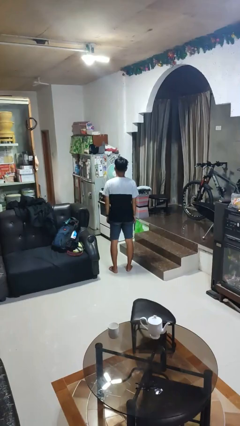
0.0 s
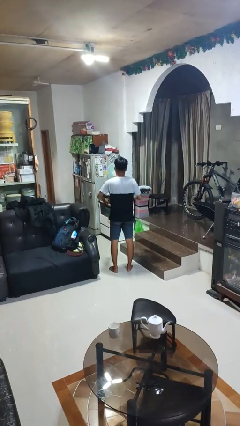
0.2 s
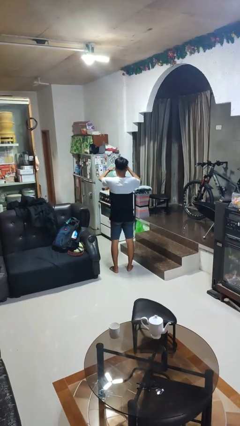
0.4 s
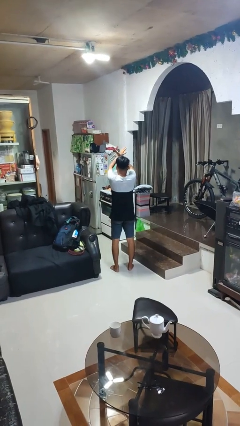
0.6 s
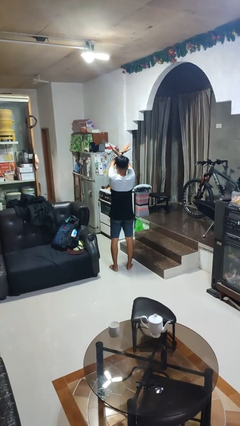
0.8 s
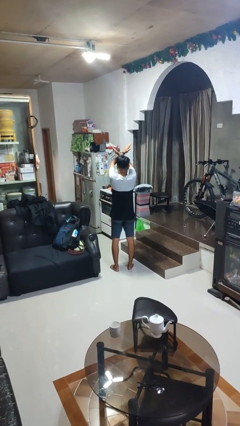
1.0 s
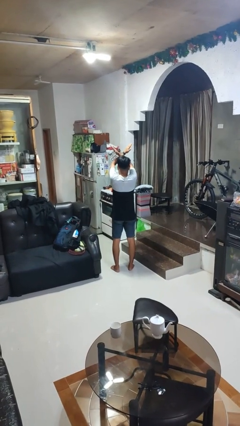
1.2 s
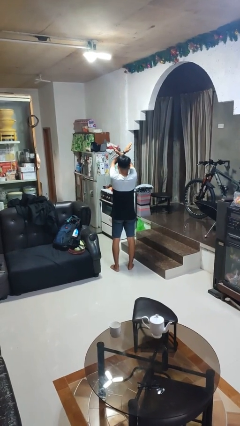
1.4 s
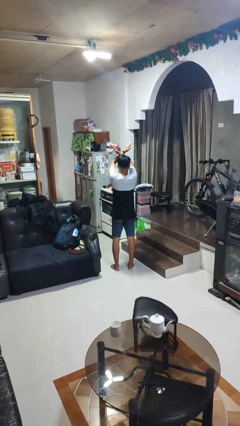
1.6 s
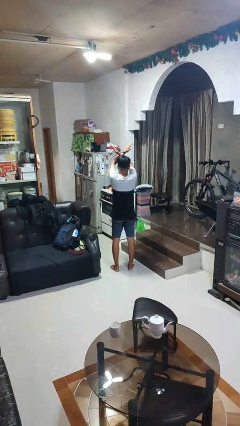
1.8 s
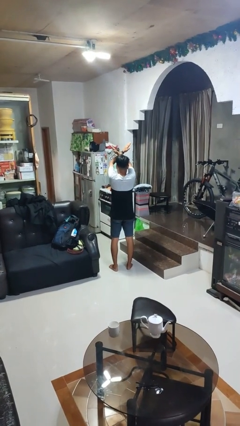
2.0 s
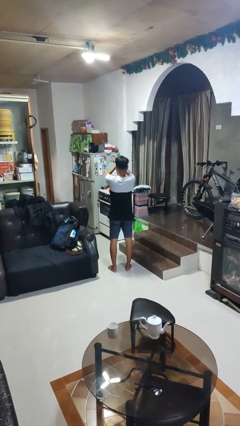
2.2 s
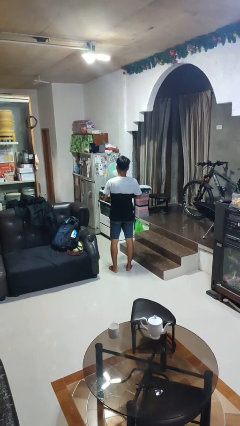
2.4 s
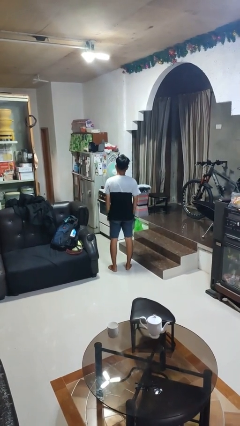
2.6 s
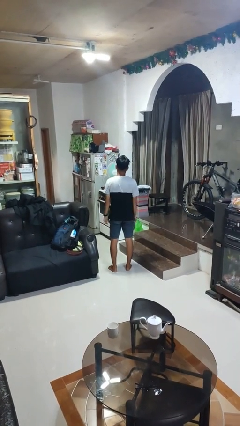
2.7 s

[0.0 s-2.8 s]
person gestures arms x

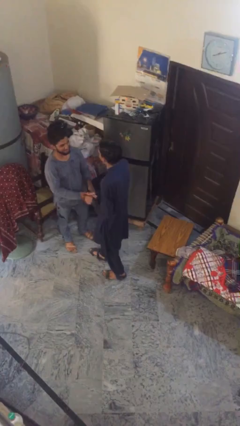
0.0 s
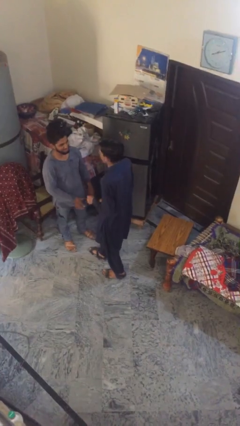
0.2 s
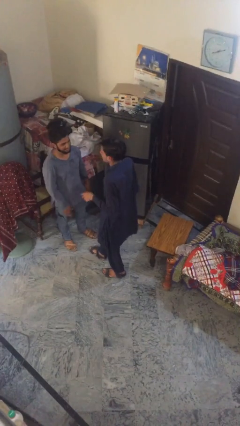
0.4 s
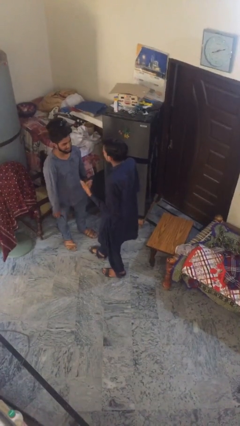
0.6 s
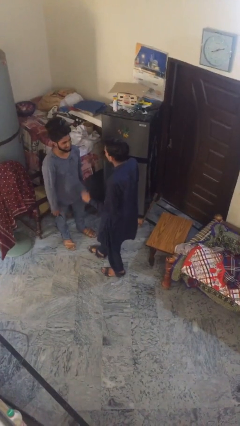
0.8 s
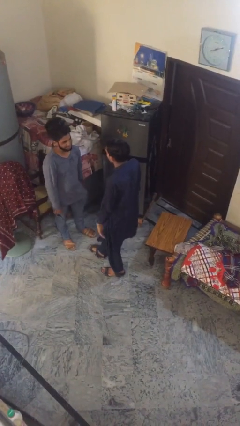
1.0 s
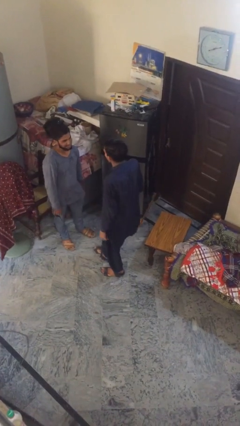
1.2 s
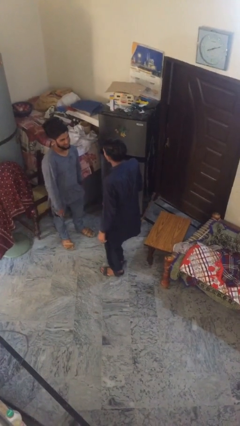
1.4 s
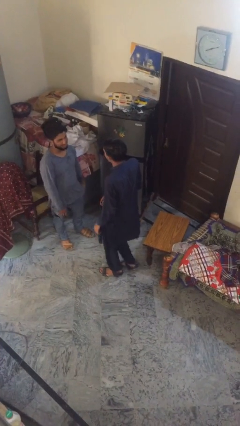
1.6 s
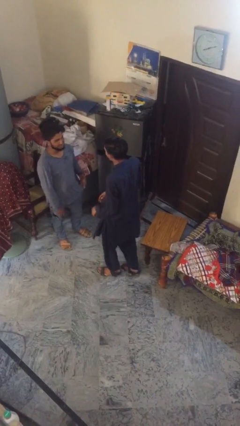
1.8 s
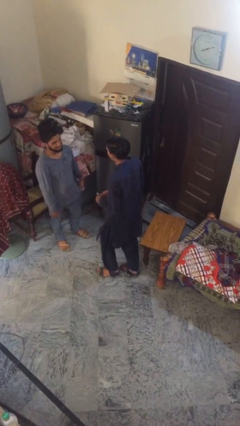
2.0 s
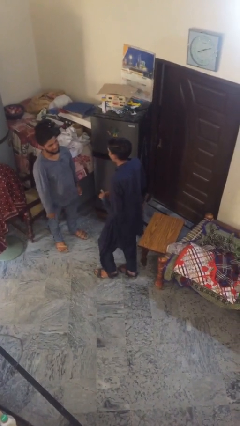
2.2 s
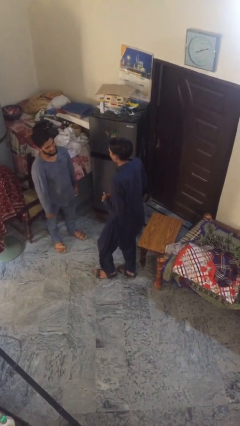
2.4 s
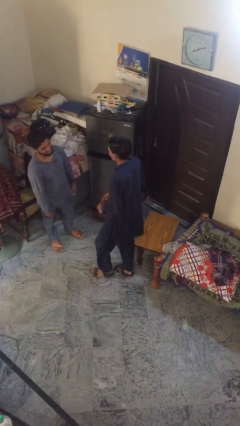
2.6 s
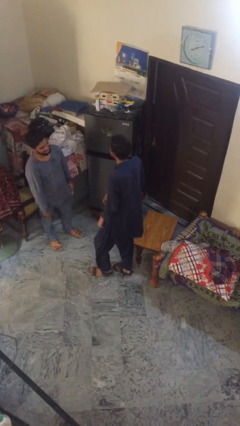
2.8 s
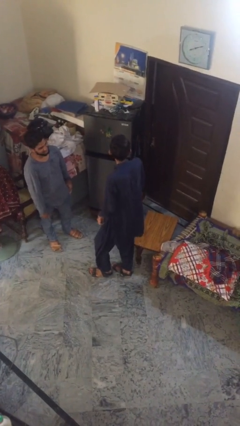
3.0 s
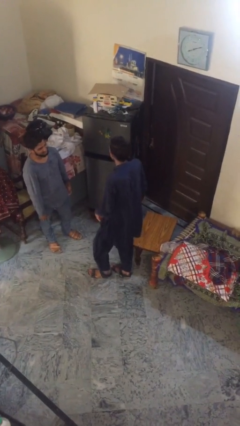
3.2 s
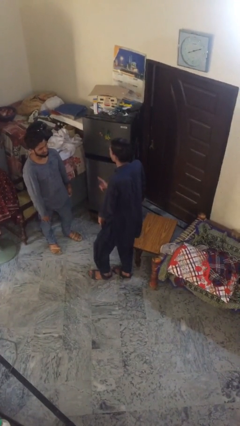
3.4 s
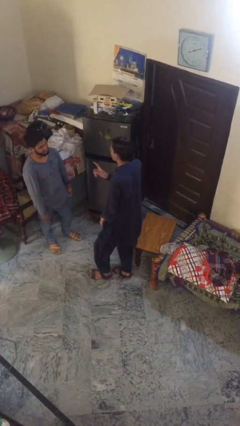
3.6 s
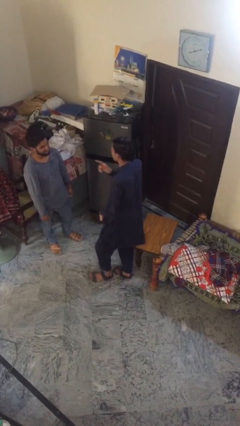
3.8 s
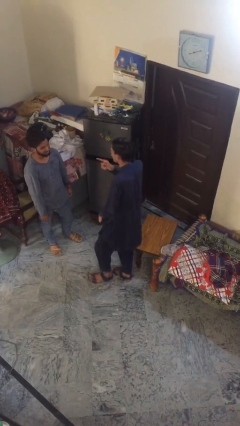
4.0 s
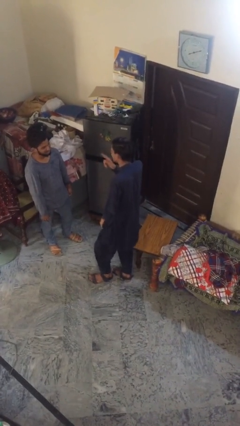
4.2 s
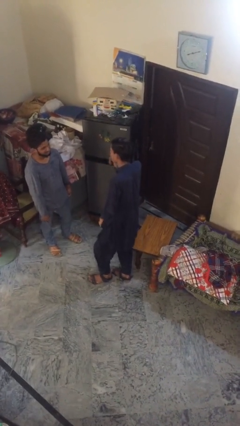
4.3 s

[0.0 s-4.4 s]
person talks to person

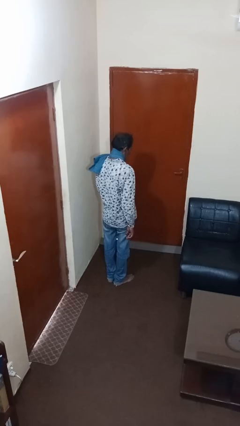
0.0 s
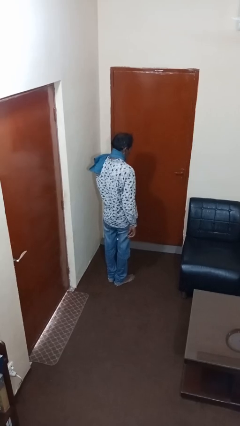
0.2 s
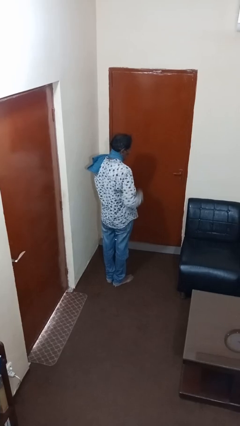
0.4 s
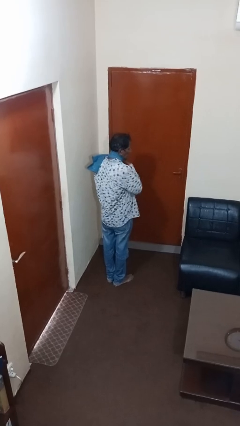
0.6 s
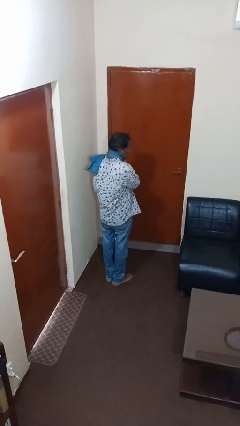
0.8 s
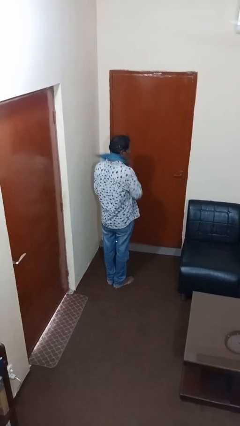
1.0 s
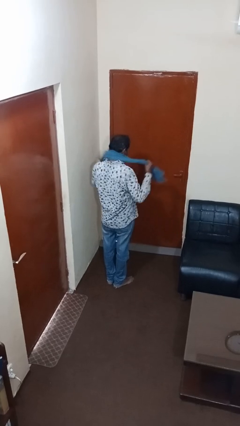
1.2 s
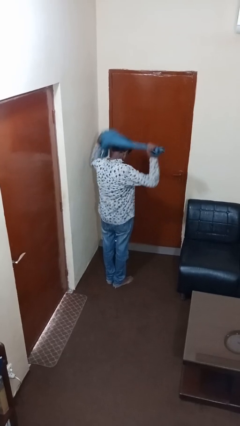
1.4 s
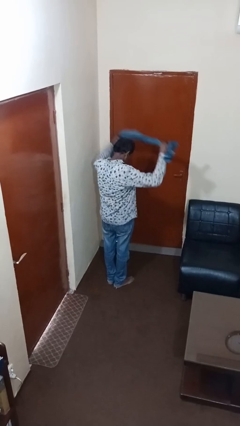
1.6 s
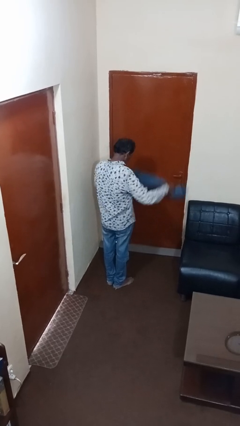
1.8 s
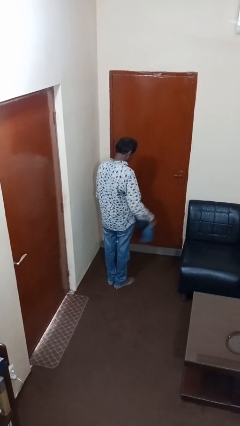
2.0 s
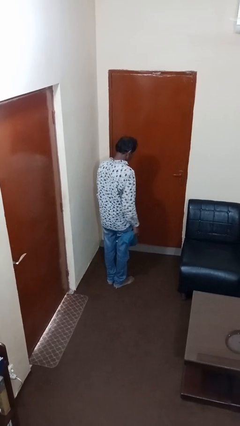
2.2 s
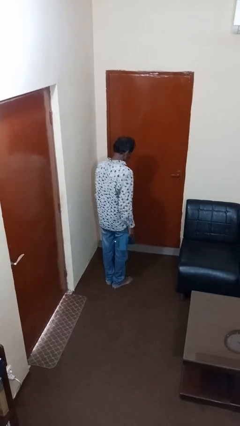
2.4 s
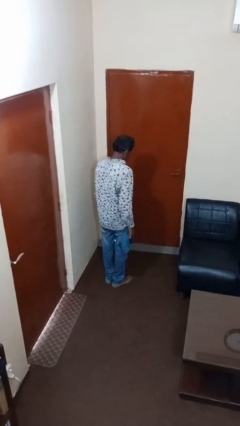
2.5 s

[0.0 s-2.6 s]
person takes off scarf

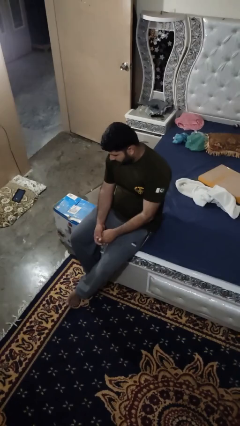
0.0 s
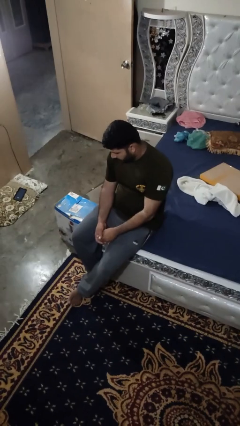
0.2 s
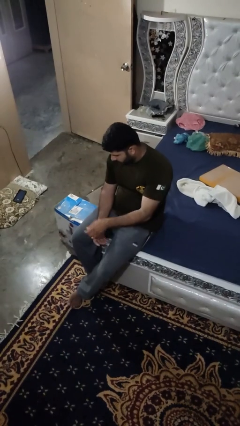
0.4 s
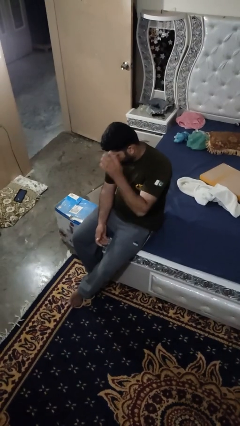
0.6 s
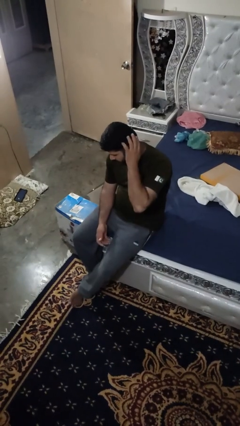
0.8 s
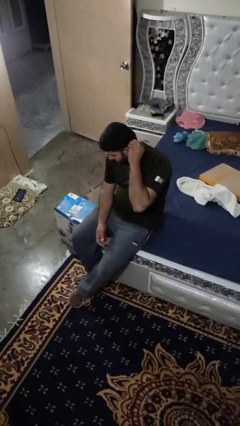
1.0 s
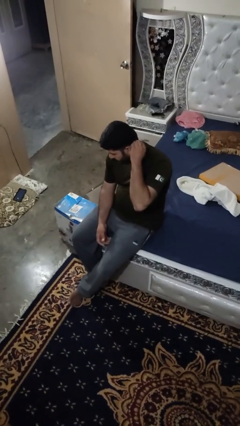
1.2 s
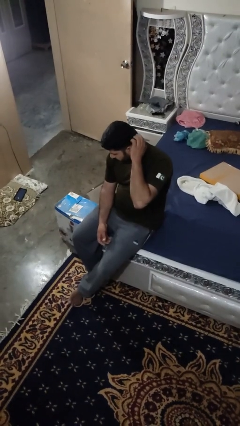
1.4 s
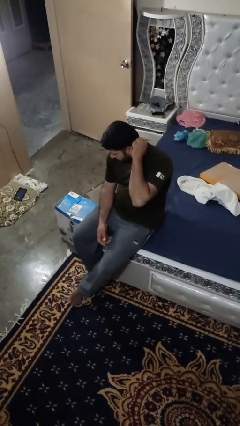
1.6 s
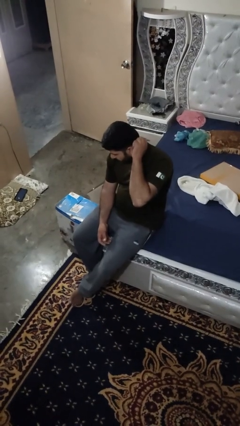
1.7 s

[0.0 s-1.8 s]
person strokes hair

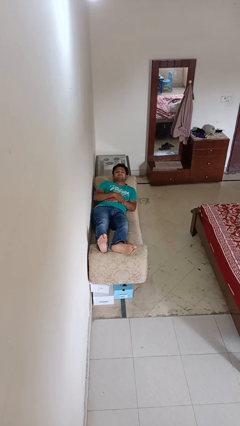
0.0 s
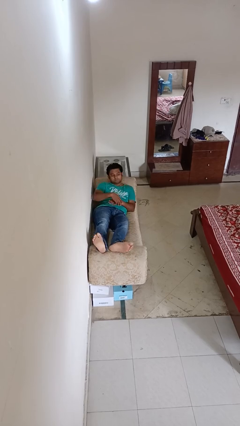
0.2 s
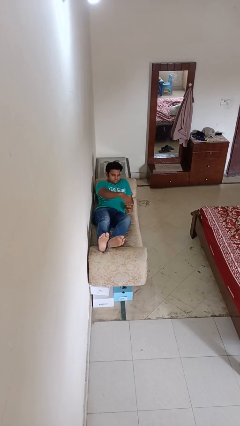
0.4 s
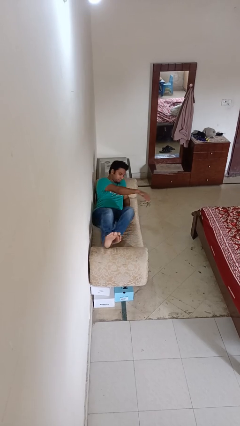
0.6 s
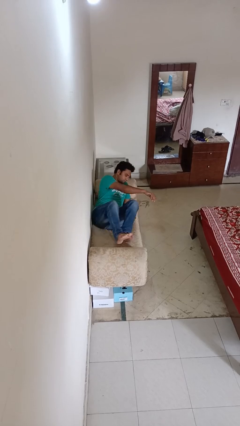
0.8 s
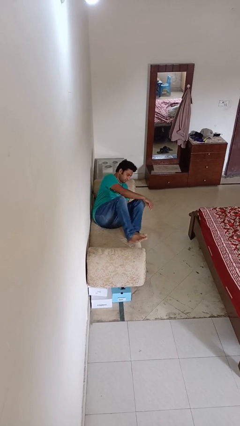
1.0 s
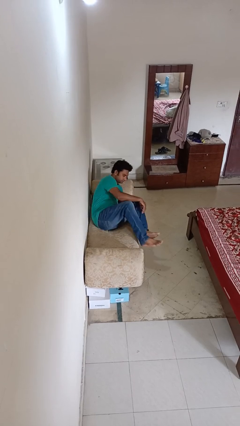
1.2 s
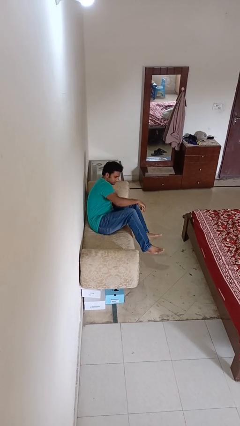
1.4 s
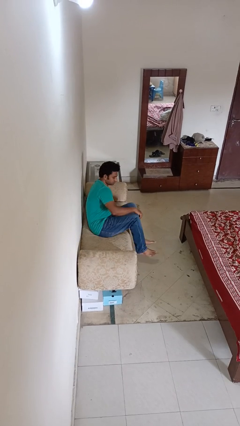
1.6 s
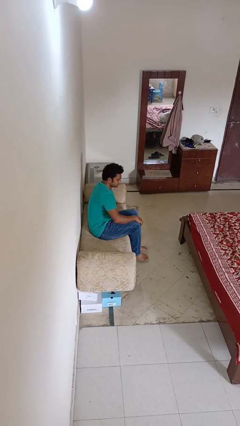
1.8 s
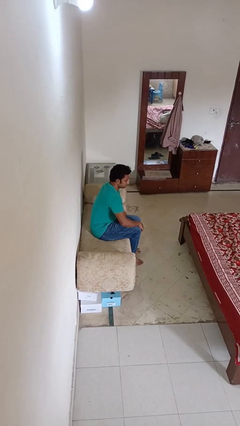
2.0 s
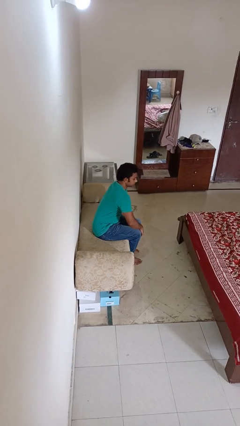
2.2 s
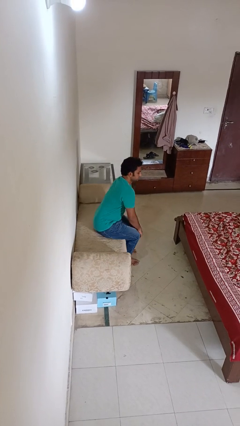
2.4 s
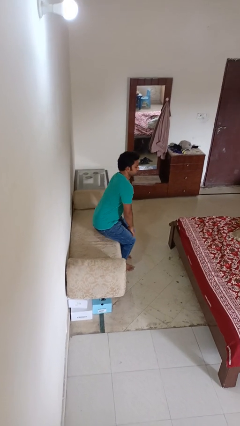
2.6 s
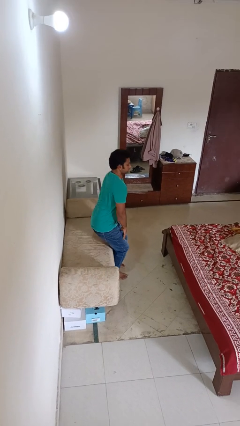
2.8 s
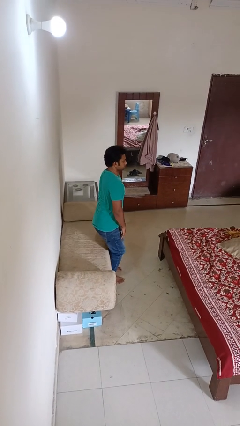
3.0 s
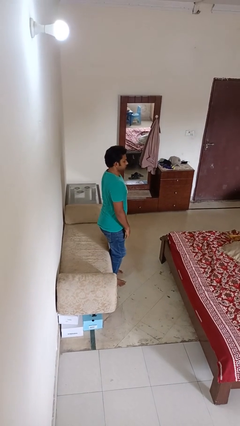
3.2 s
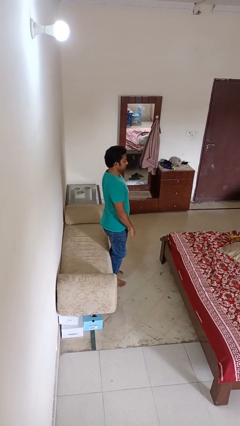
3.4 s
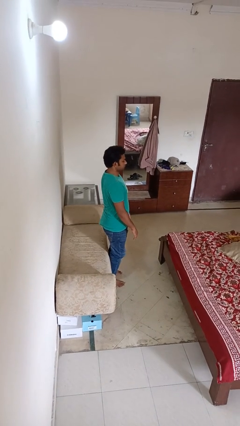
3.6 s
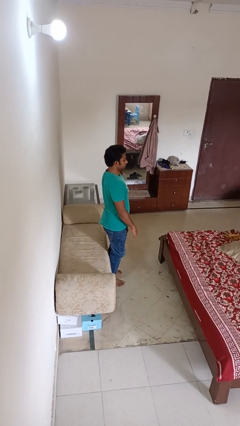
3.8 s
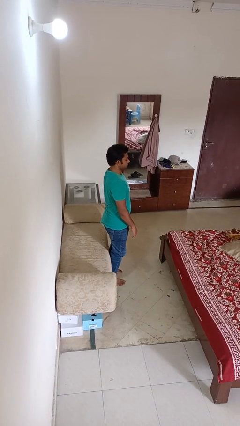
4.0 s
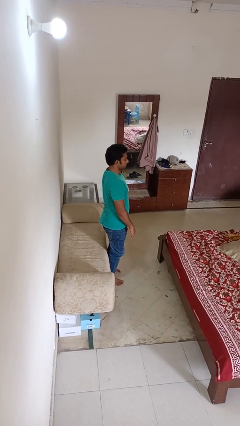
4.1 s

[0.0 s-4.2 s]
person stands up

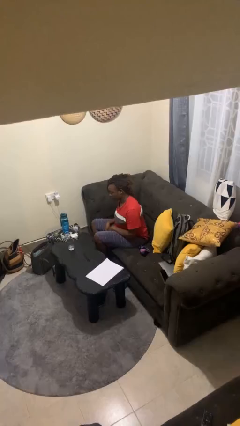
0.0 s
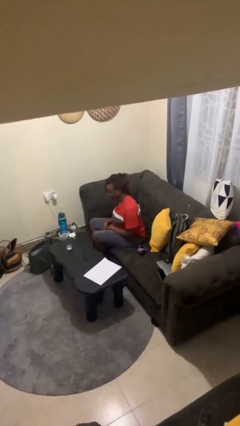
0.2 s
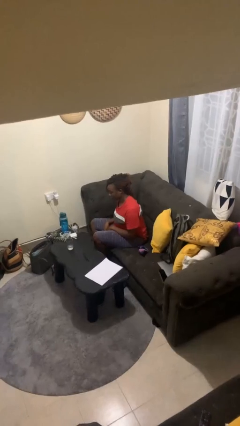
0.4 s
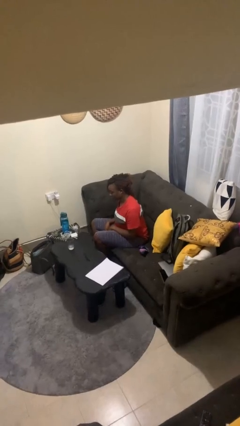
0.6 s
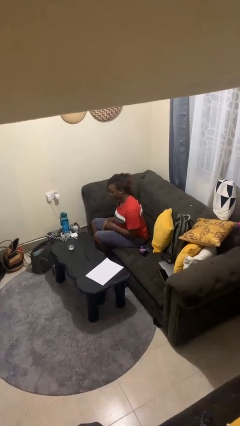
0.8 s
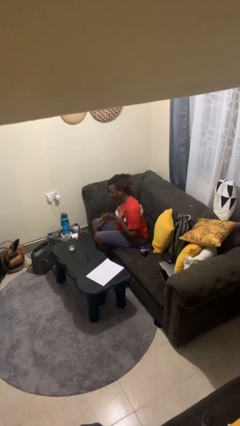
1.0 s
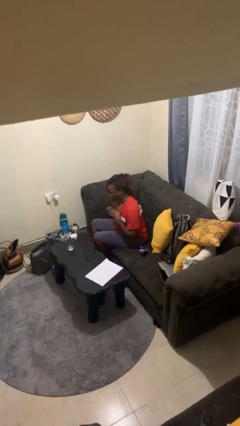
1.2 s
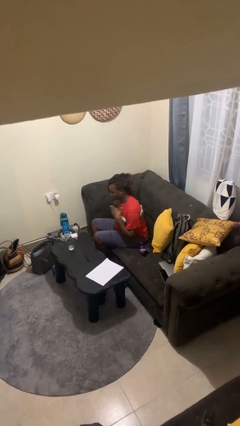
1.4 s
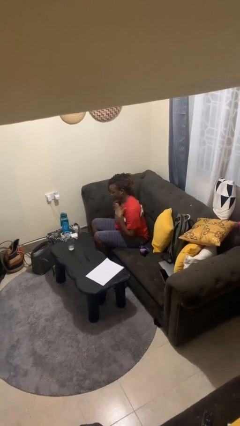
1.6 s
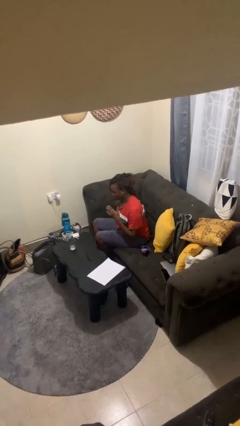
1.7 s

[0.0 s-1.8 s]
person drums on chest
